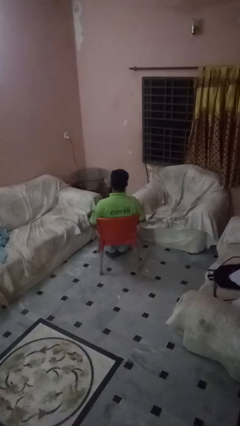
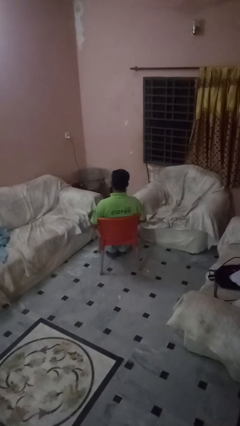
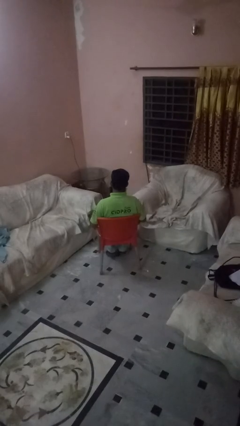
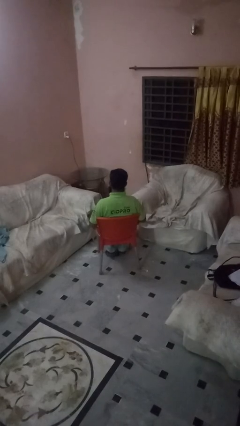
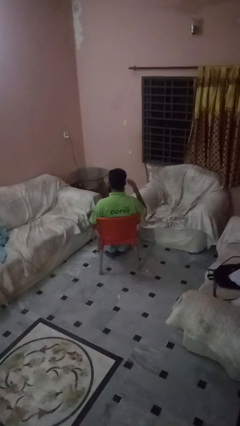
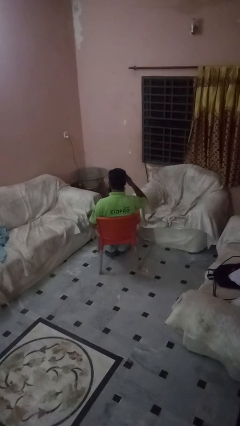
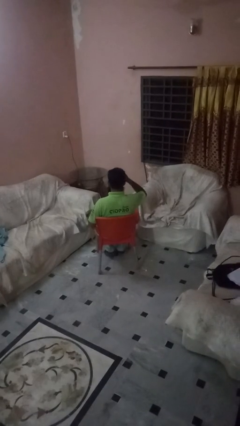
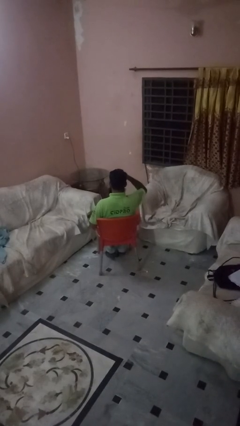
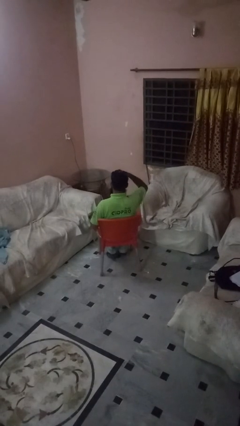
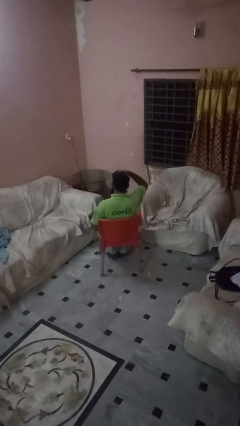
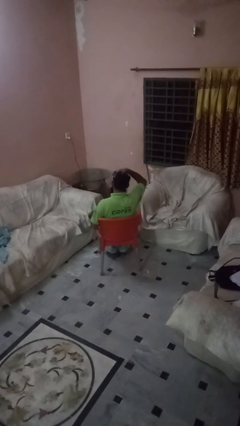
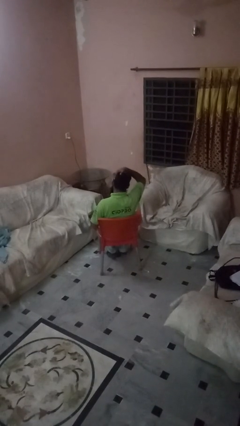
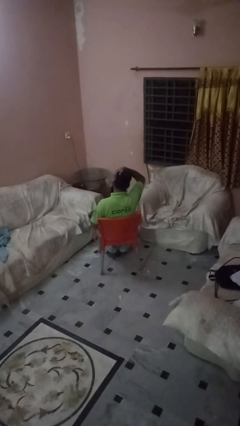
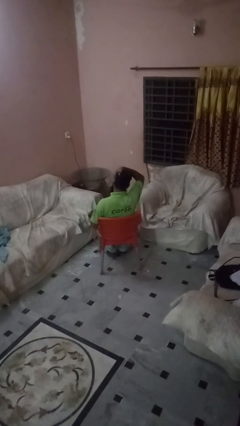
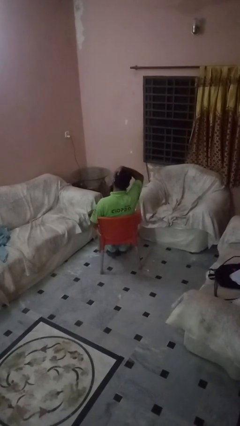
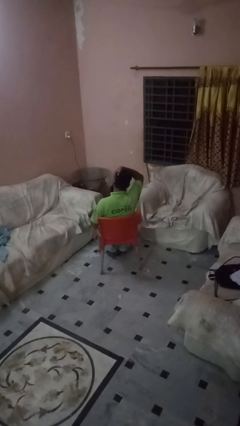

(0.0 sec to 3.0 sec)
person strokes hair

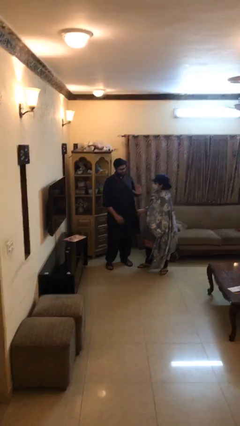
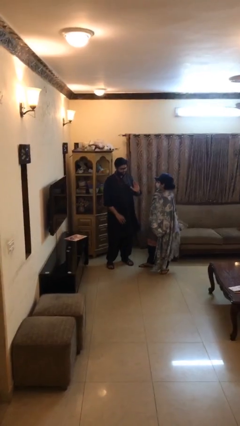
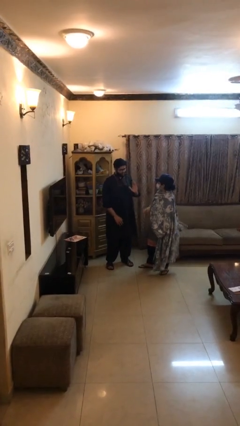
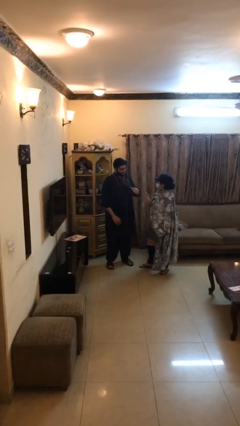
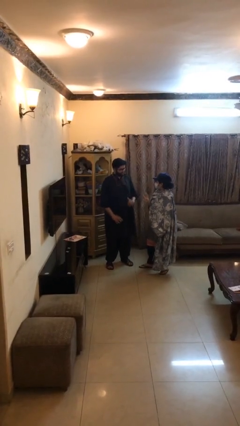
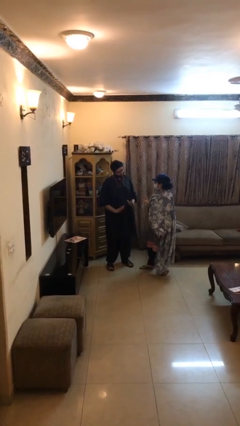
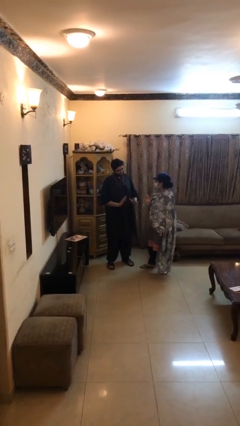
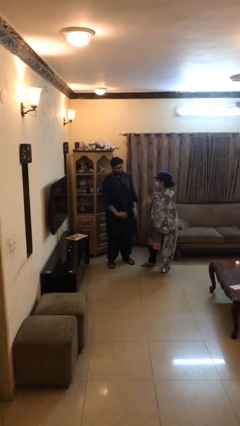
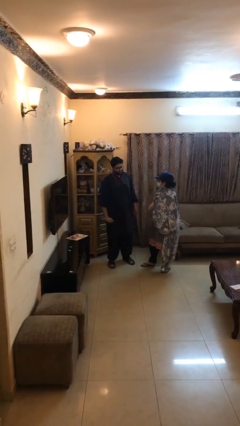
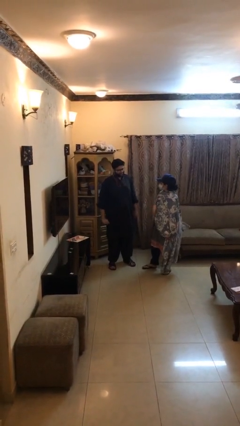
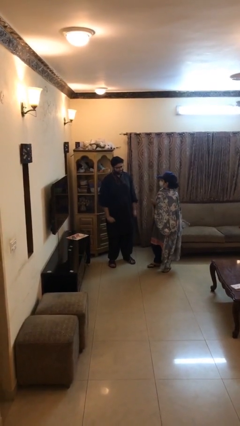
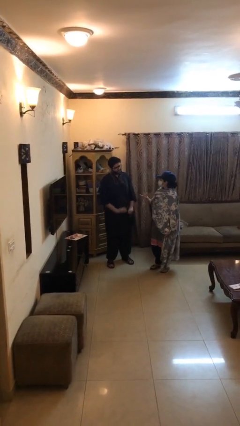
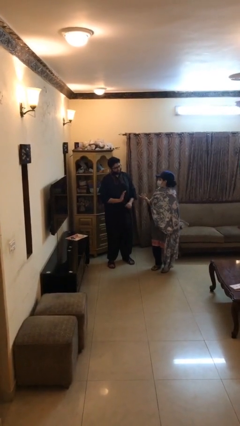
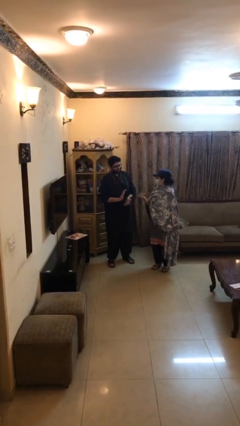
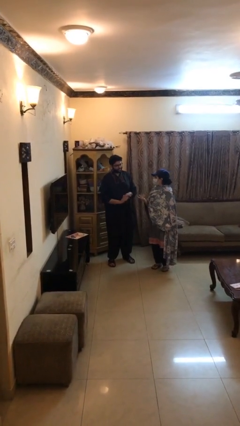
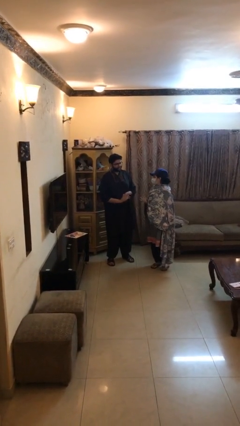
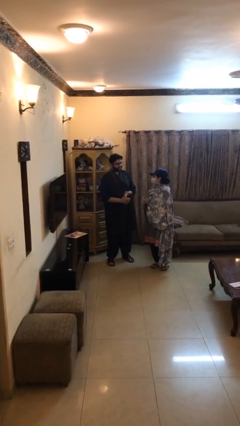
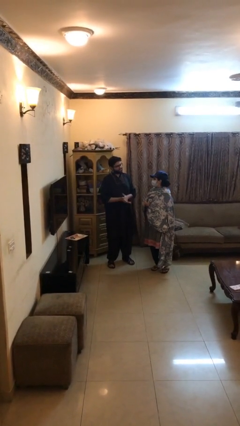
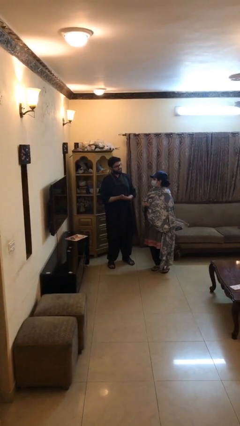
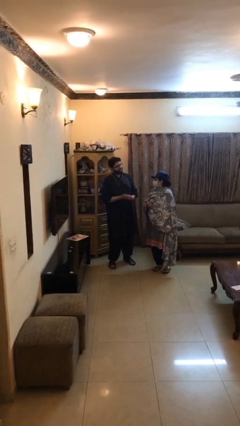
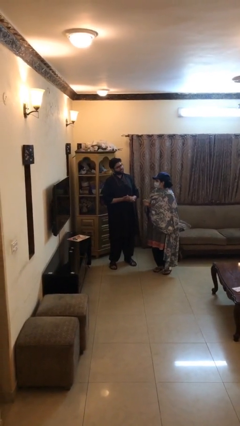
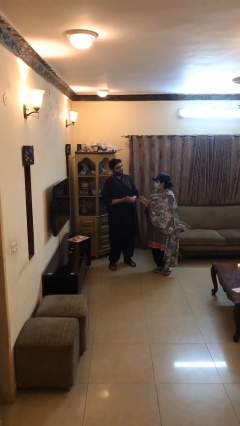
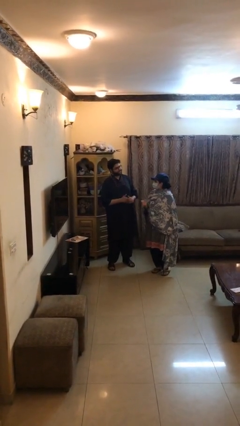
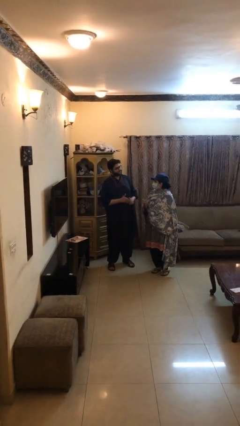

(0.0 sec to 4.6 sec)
person talks to person

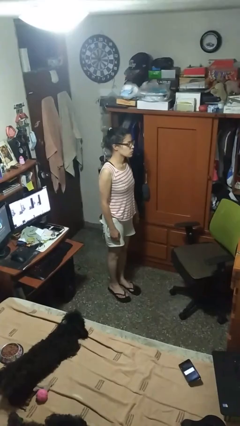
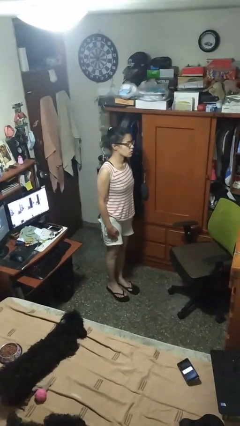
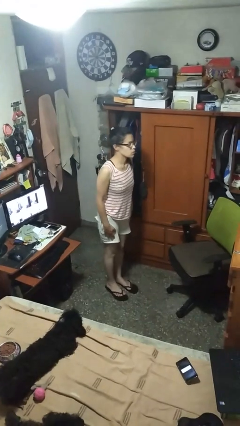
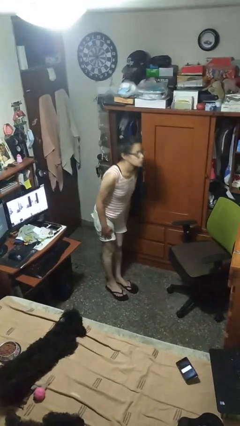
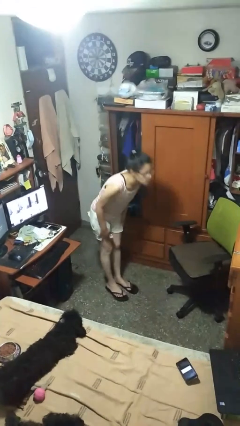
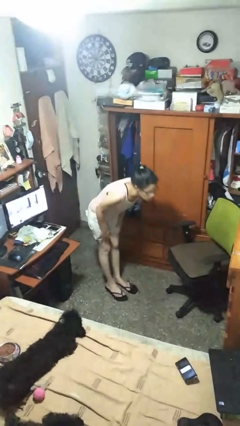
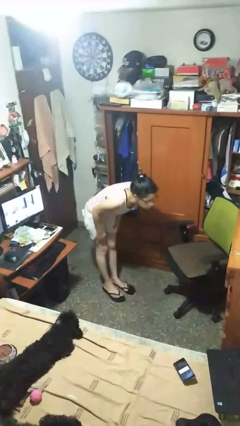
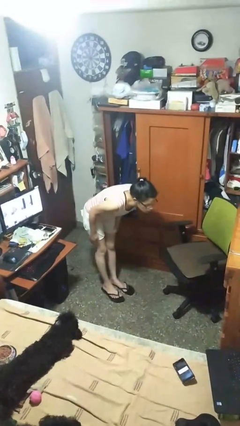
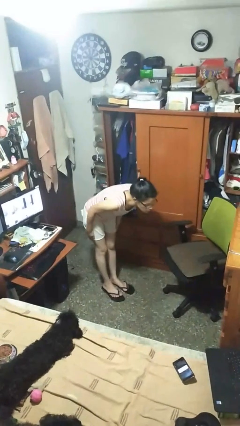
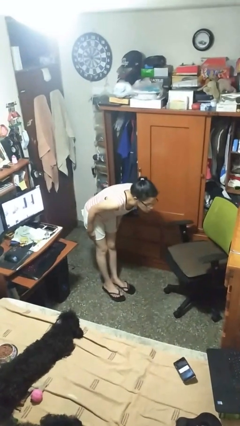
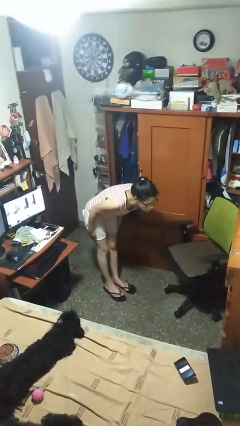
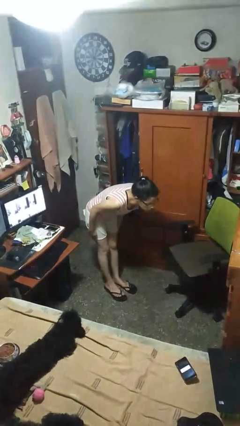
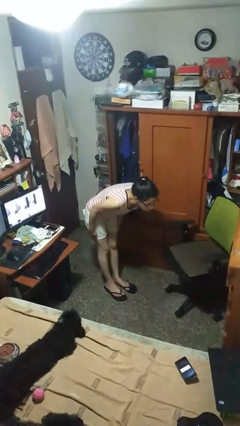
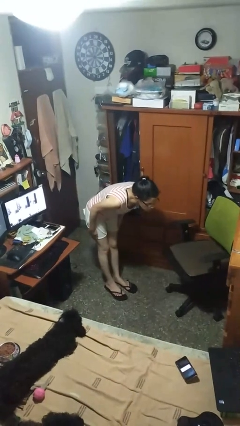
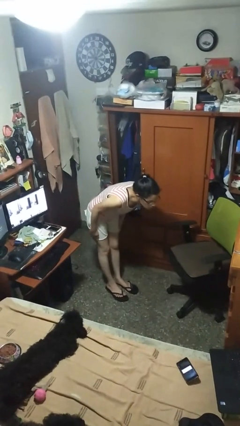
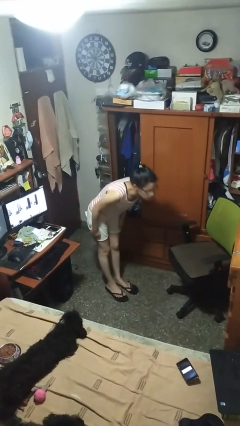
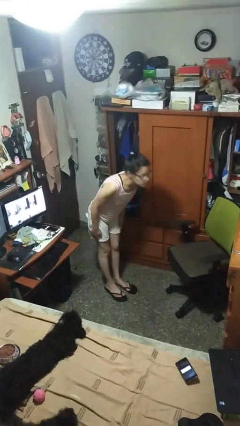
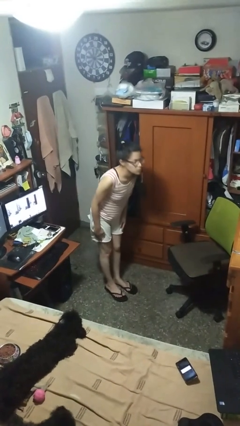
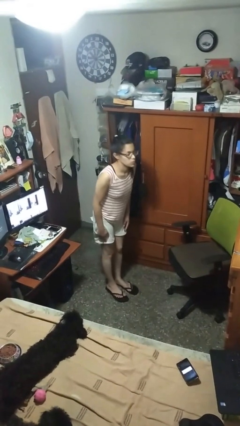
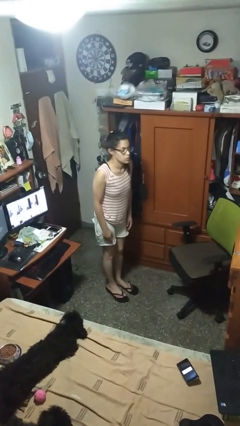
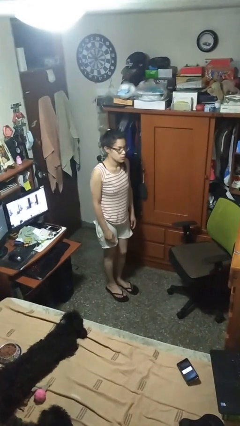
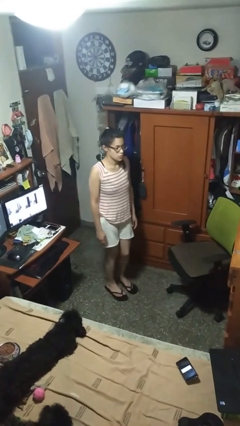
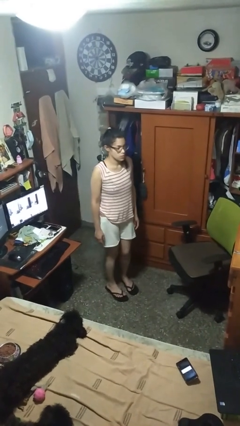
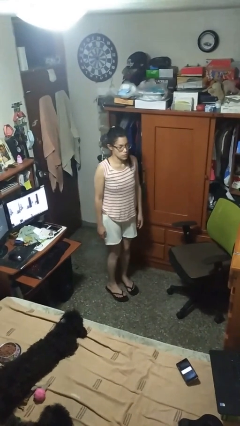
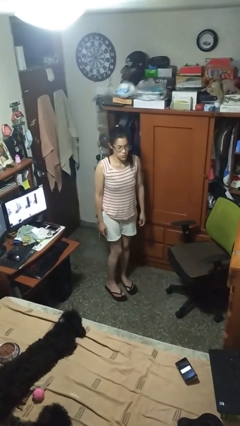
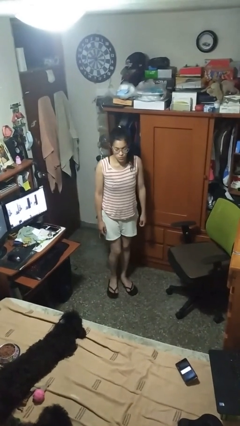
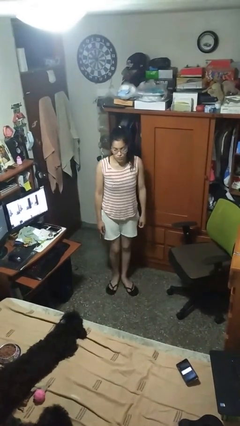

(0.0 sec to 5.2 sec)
person bows

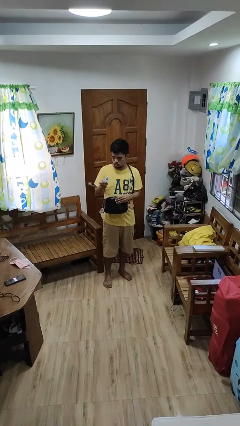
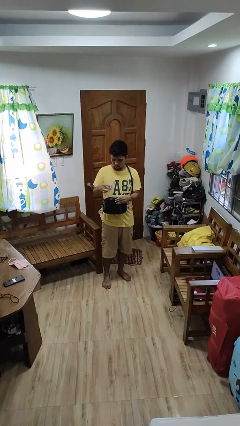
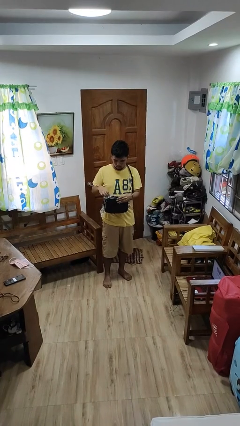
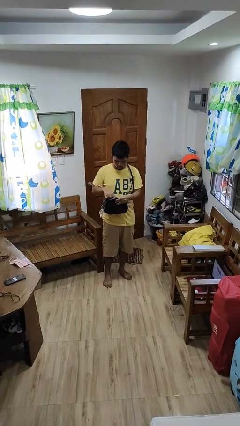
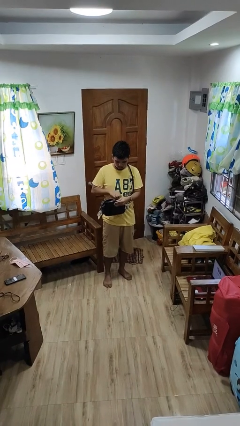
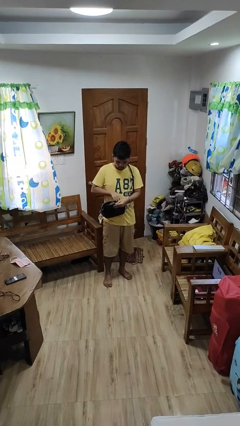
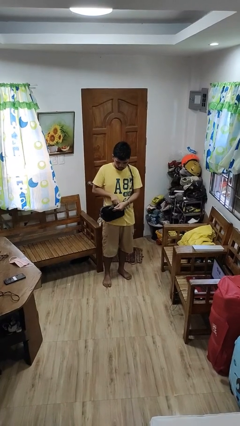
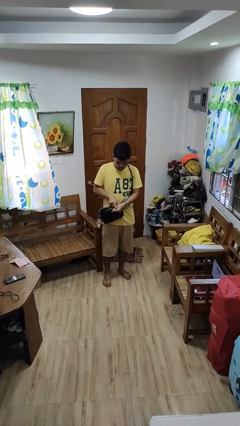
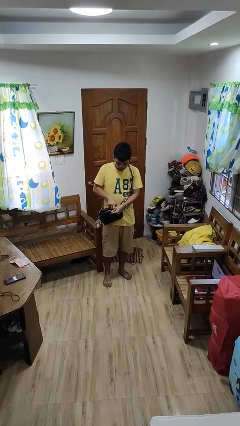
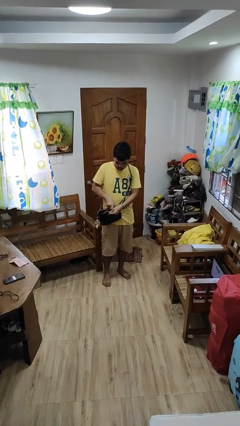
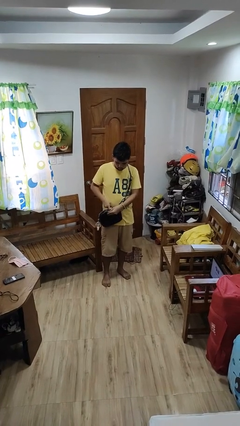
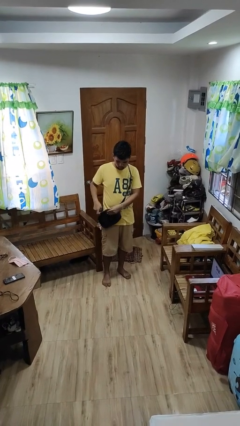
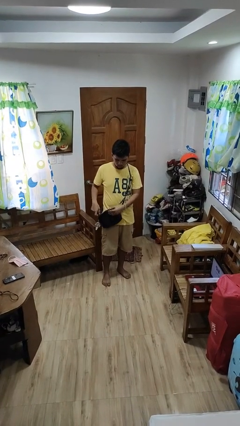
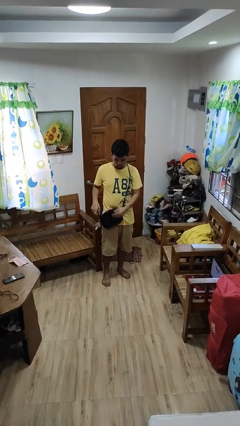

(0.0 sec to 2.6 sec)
person puts object into purse

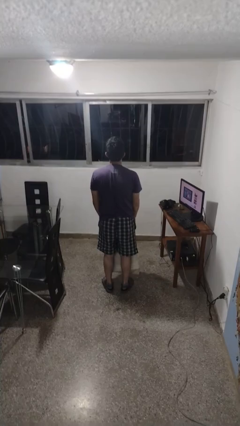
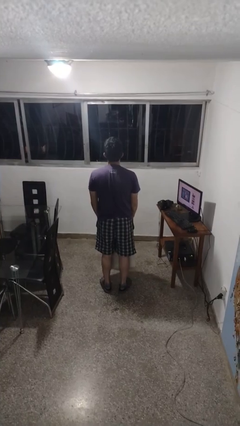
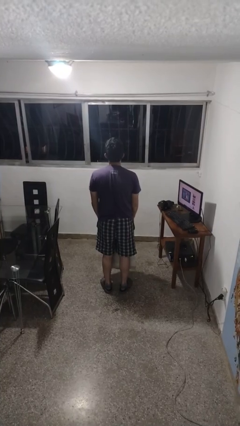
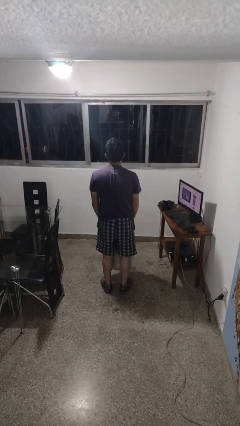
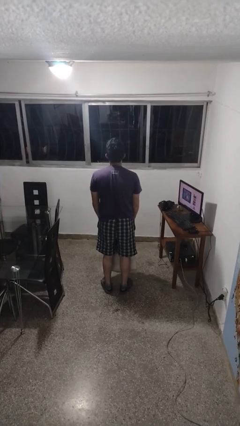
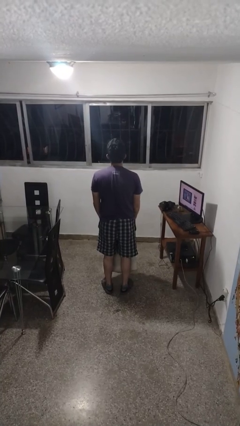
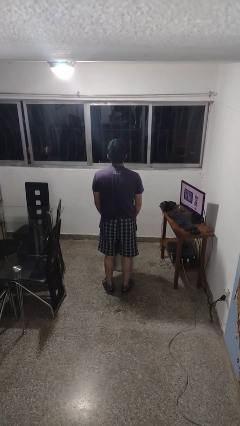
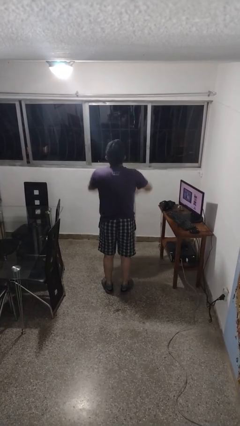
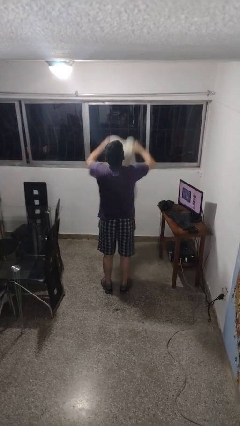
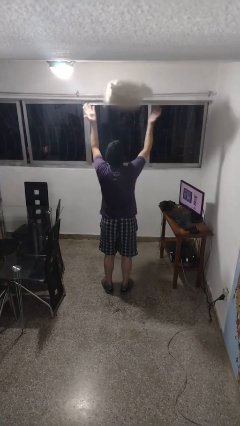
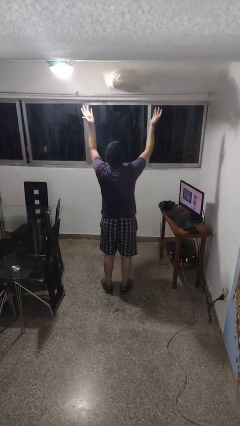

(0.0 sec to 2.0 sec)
person drops object
